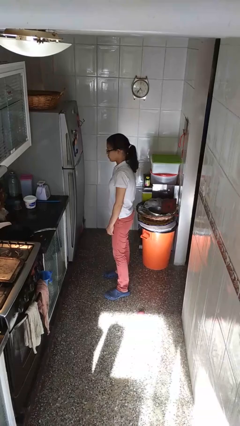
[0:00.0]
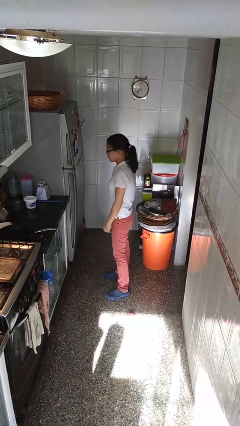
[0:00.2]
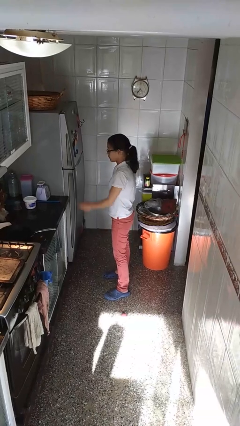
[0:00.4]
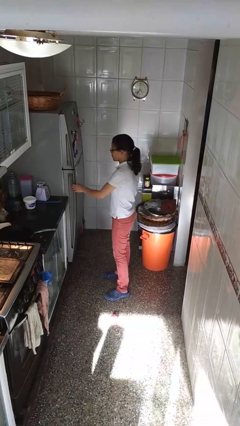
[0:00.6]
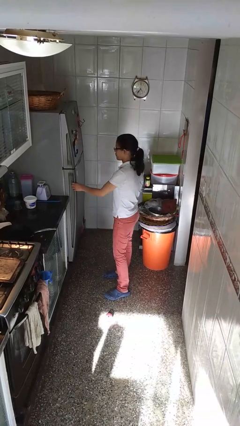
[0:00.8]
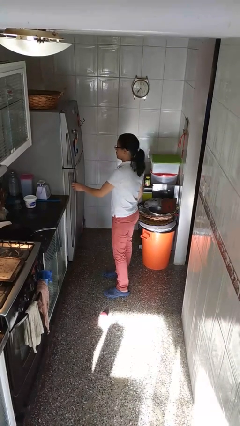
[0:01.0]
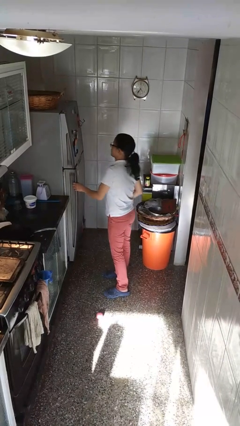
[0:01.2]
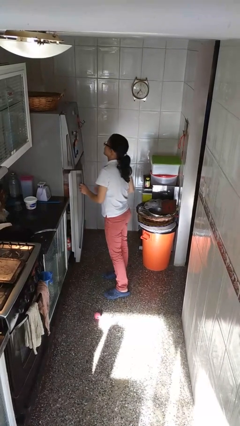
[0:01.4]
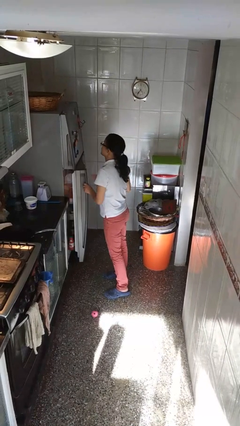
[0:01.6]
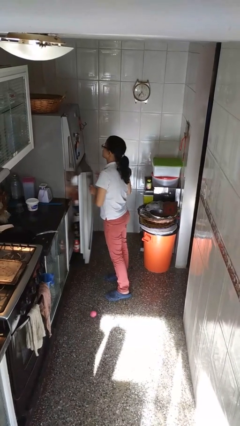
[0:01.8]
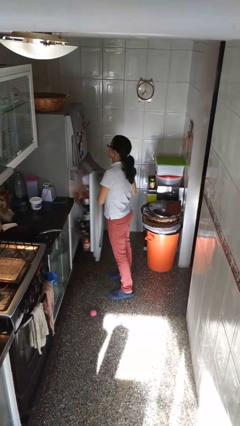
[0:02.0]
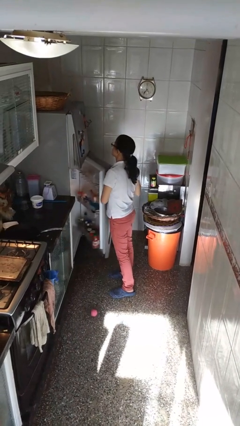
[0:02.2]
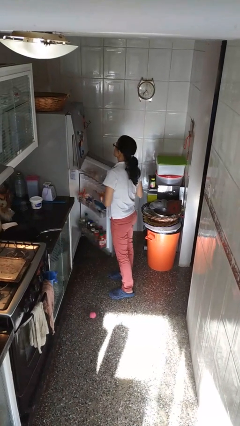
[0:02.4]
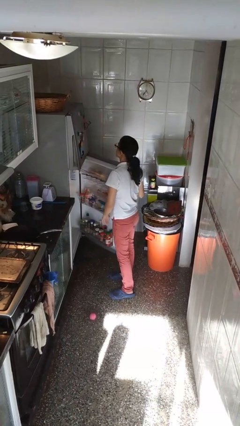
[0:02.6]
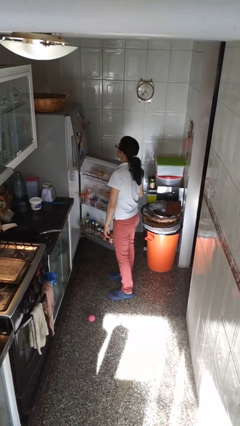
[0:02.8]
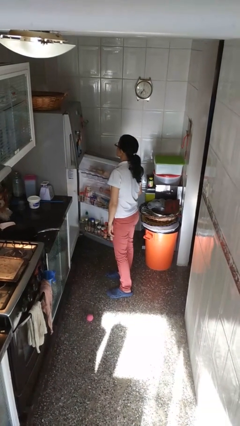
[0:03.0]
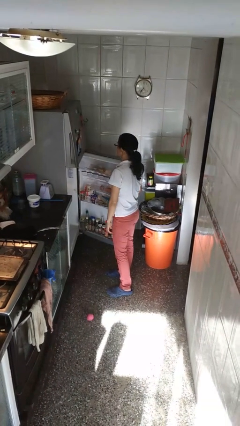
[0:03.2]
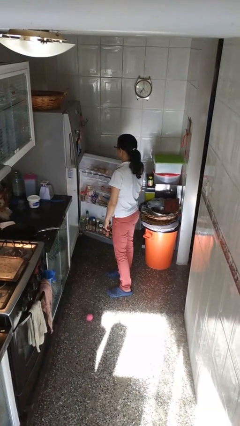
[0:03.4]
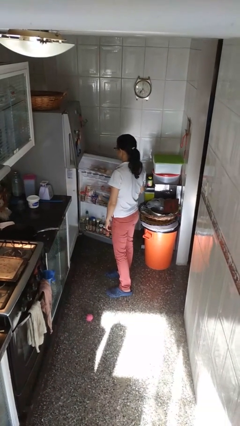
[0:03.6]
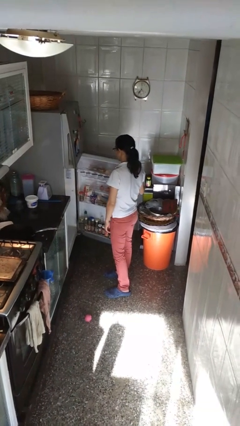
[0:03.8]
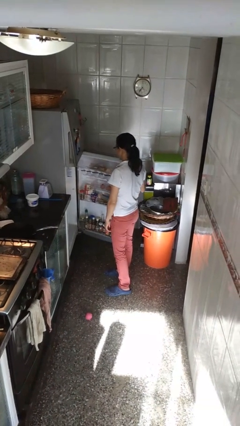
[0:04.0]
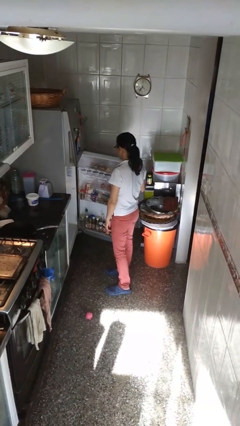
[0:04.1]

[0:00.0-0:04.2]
person opens refrigerator

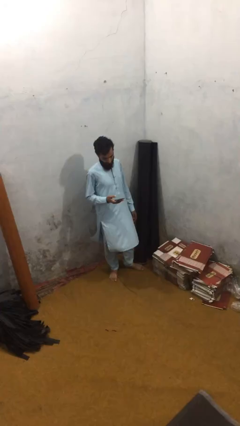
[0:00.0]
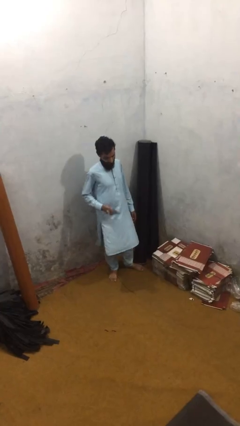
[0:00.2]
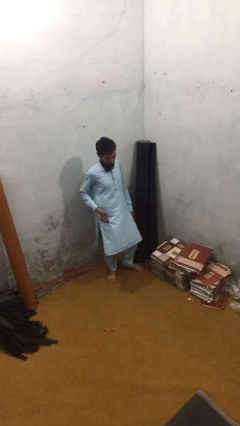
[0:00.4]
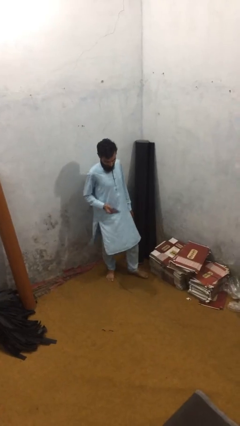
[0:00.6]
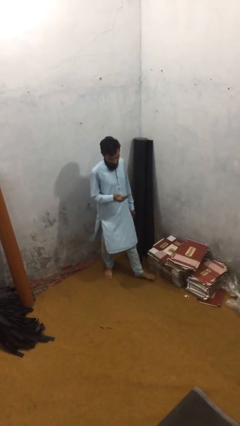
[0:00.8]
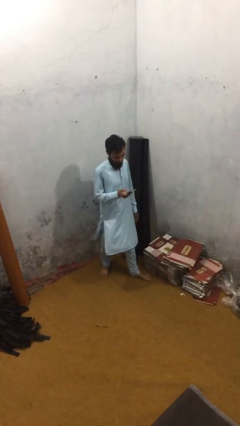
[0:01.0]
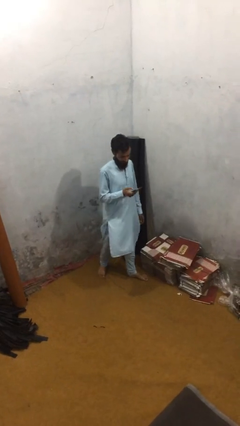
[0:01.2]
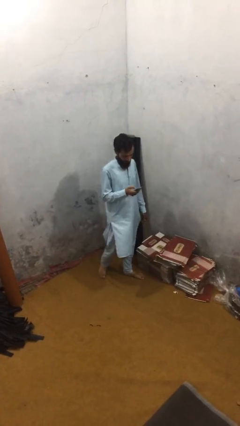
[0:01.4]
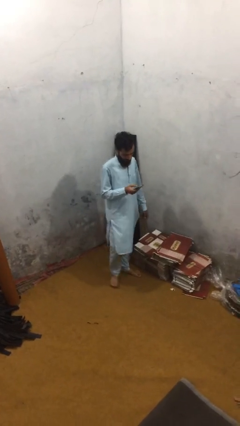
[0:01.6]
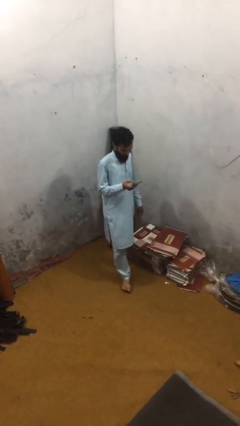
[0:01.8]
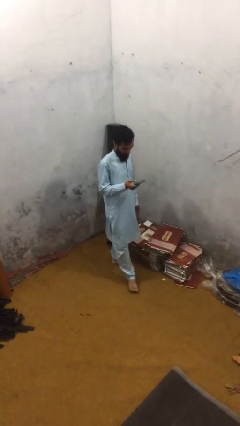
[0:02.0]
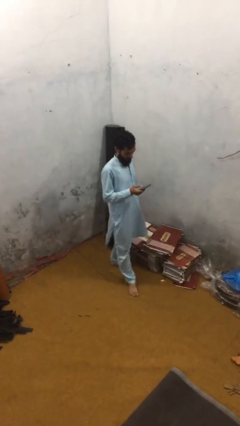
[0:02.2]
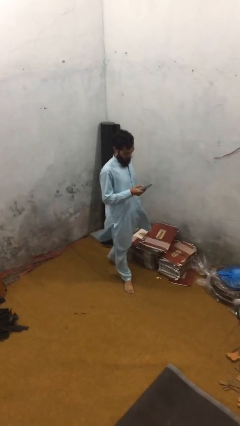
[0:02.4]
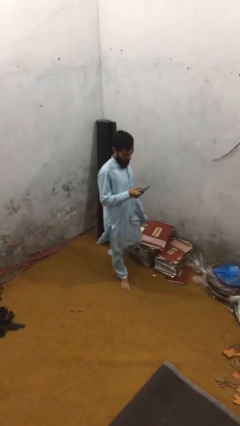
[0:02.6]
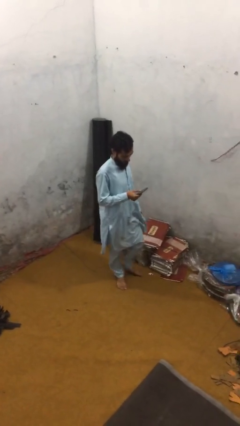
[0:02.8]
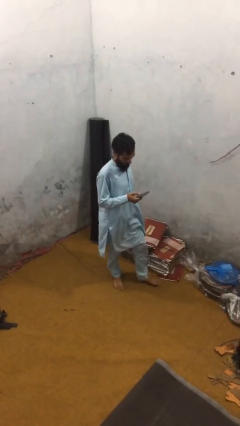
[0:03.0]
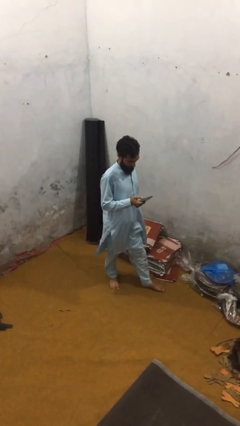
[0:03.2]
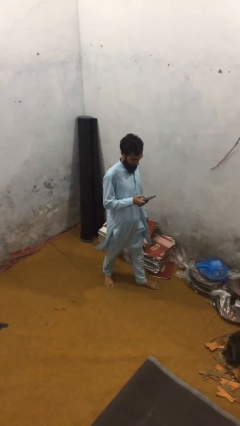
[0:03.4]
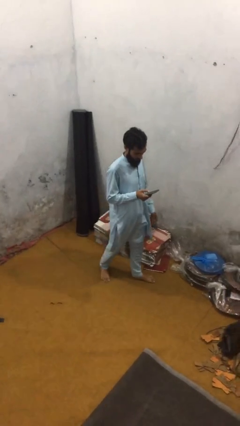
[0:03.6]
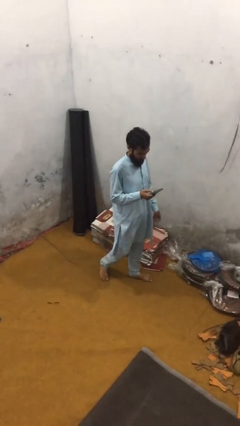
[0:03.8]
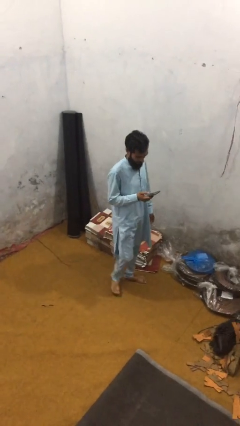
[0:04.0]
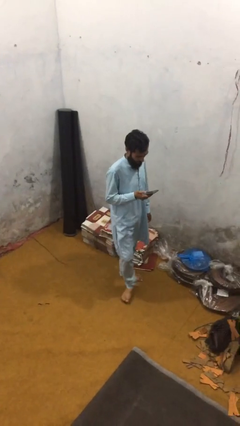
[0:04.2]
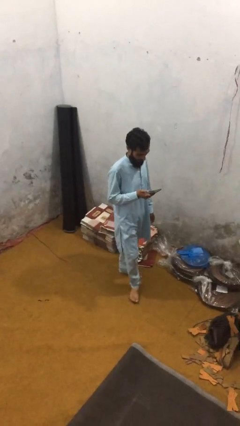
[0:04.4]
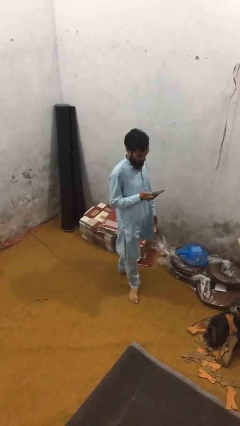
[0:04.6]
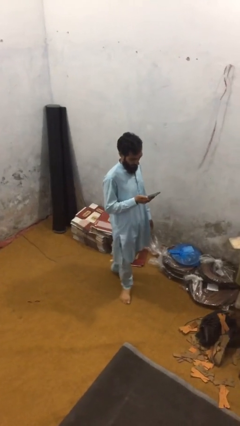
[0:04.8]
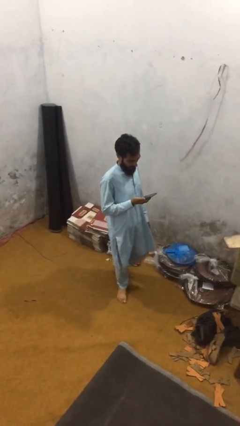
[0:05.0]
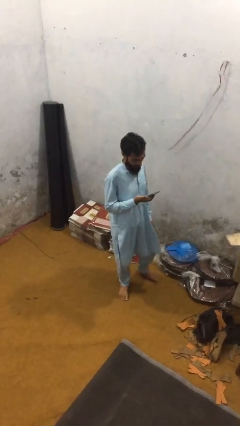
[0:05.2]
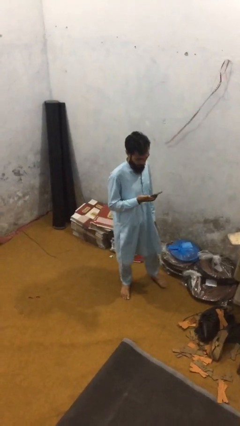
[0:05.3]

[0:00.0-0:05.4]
person texts on phone

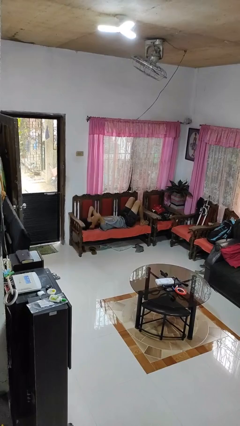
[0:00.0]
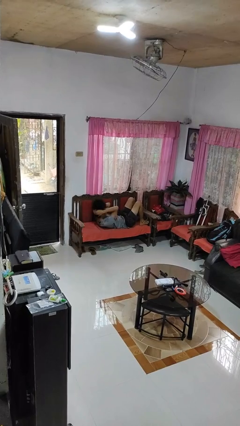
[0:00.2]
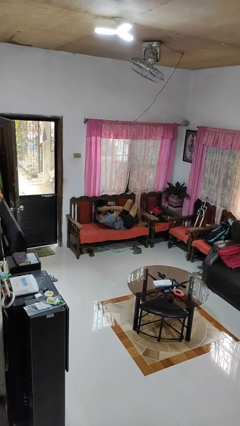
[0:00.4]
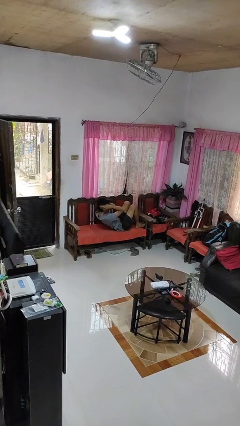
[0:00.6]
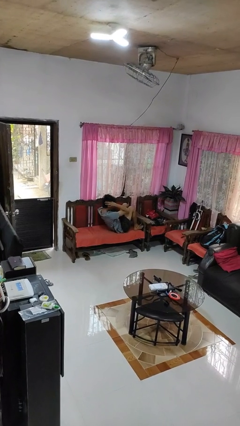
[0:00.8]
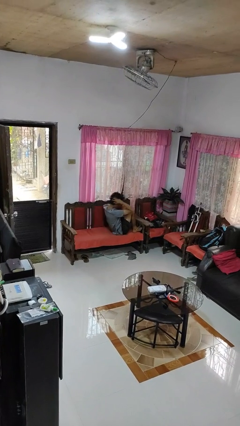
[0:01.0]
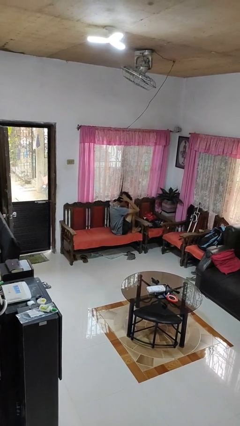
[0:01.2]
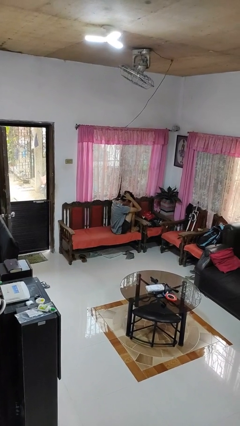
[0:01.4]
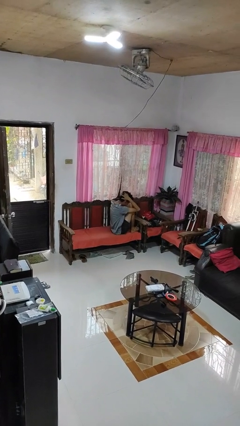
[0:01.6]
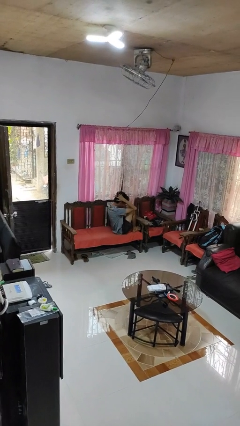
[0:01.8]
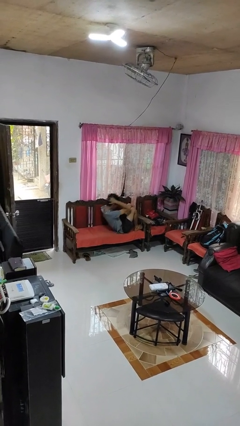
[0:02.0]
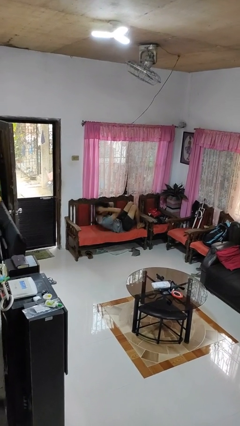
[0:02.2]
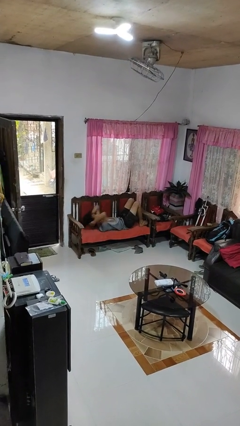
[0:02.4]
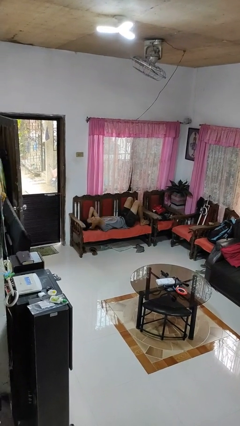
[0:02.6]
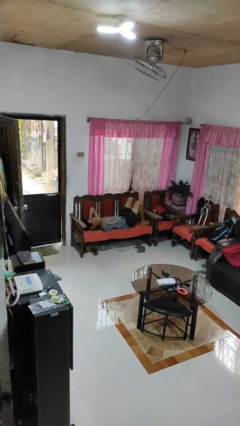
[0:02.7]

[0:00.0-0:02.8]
person exercises with situp

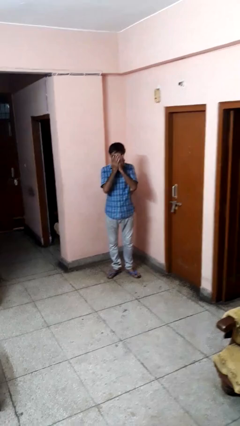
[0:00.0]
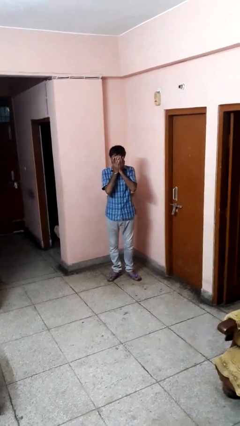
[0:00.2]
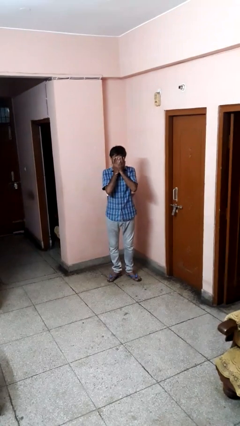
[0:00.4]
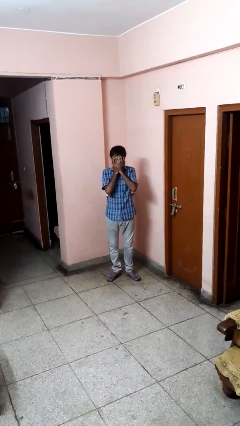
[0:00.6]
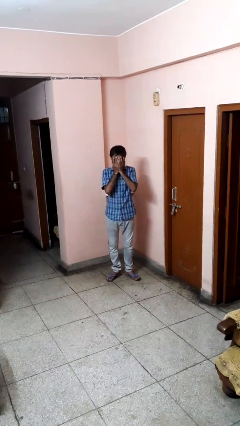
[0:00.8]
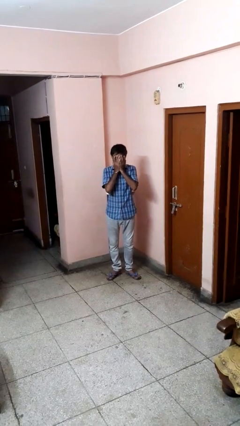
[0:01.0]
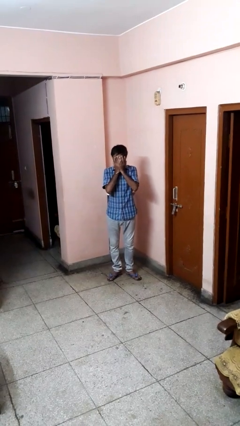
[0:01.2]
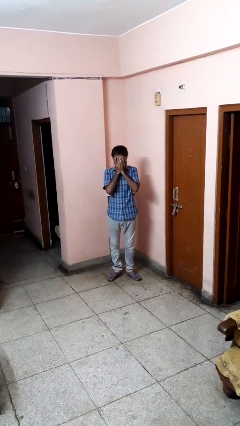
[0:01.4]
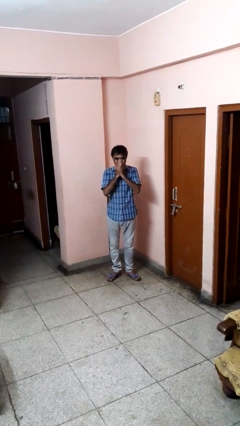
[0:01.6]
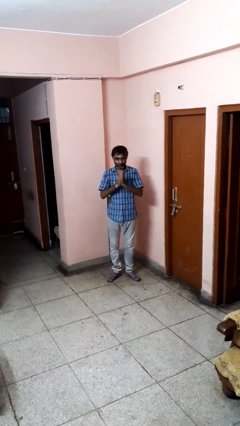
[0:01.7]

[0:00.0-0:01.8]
person covers face with hands

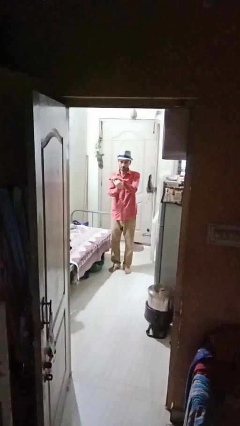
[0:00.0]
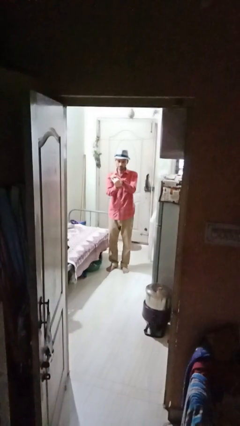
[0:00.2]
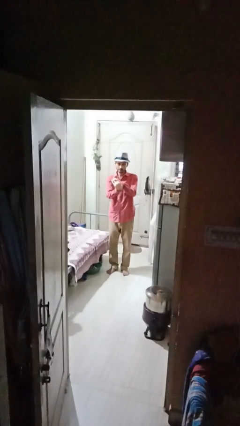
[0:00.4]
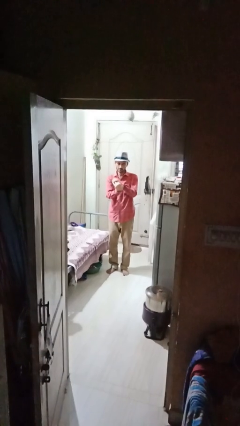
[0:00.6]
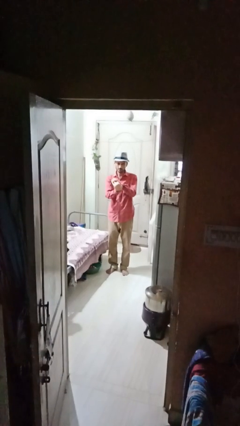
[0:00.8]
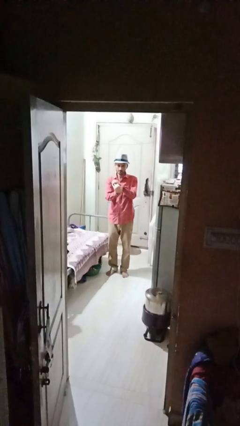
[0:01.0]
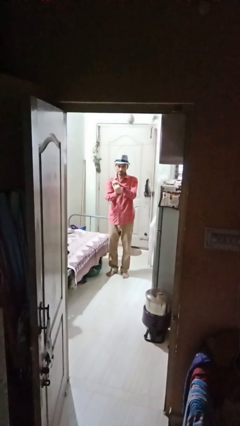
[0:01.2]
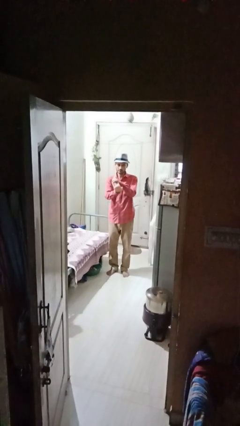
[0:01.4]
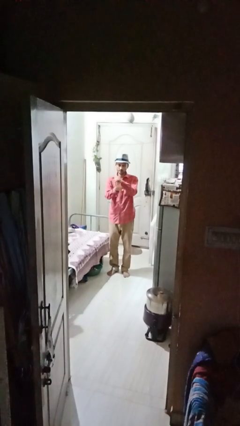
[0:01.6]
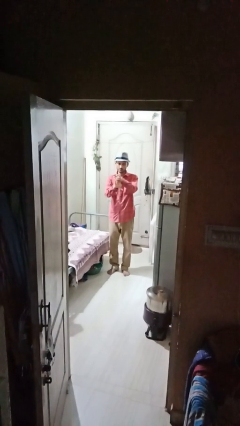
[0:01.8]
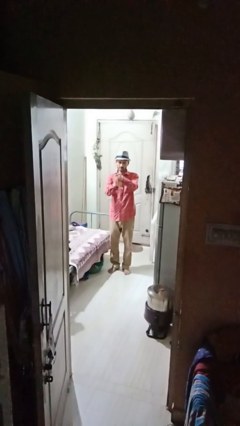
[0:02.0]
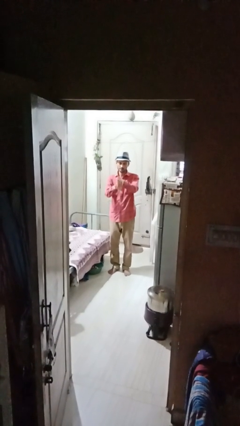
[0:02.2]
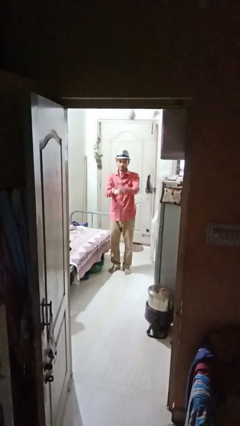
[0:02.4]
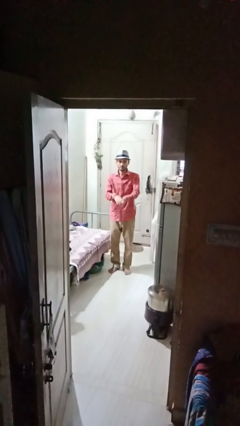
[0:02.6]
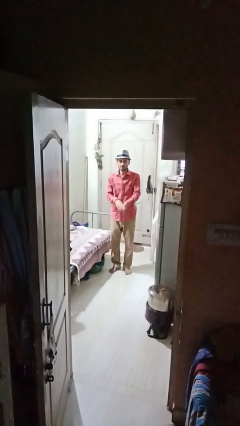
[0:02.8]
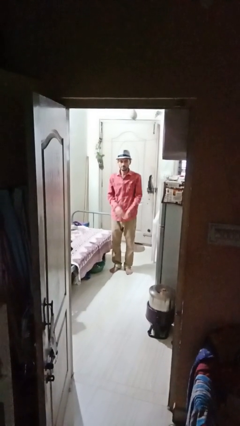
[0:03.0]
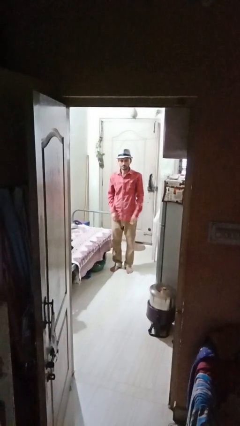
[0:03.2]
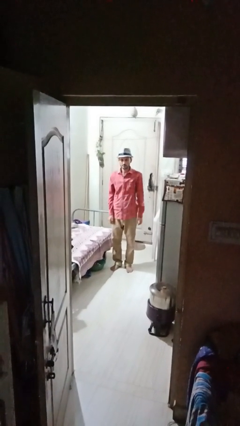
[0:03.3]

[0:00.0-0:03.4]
person cracks knuckles
